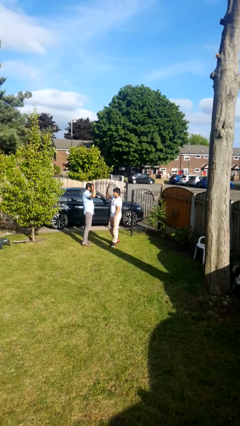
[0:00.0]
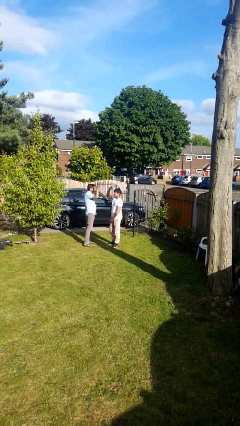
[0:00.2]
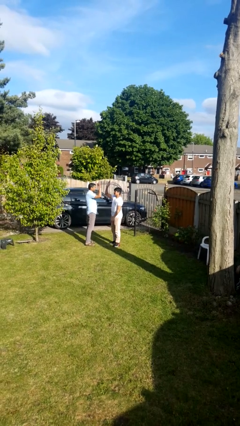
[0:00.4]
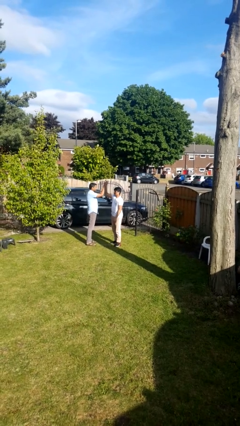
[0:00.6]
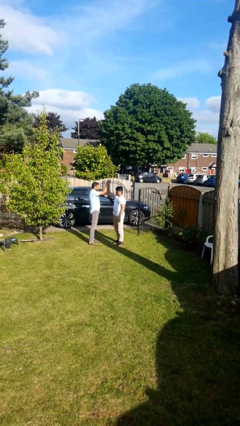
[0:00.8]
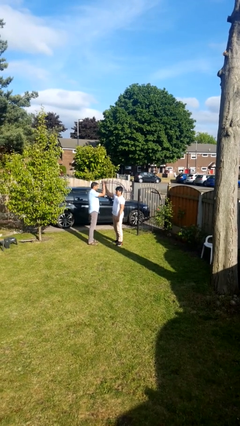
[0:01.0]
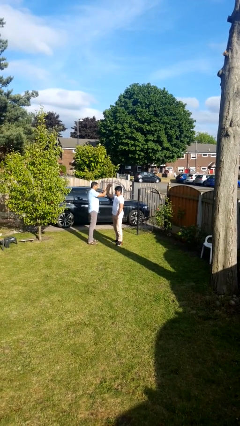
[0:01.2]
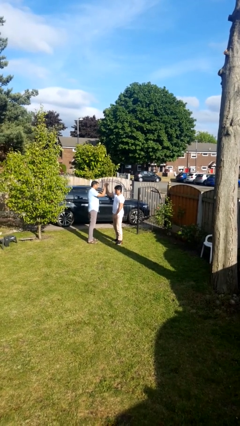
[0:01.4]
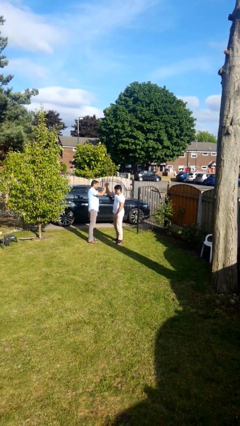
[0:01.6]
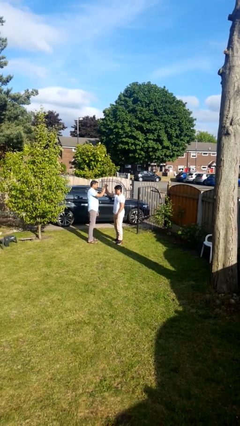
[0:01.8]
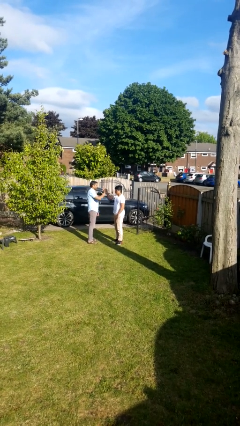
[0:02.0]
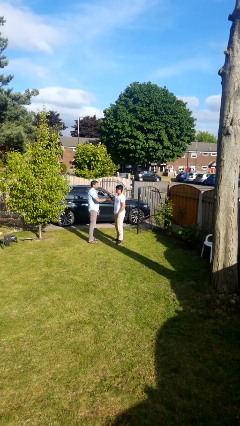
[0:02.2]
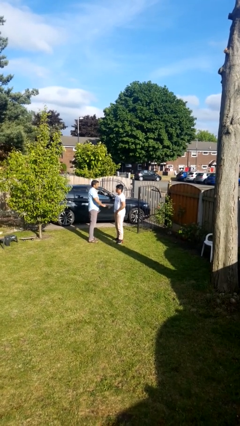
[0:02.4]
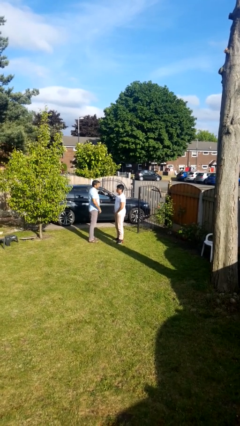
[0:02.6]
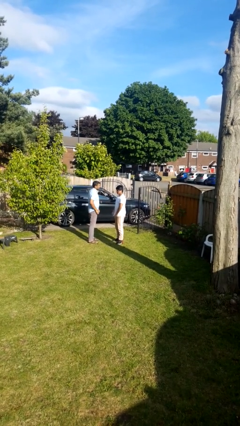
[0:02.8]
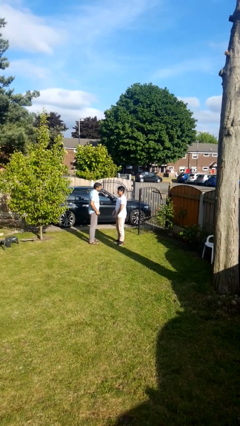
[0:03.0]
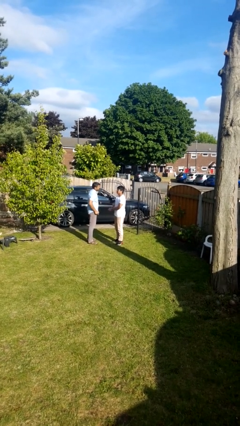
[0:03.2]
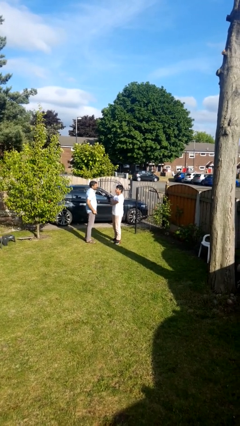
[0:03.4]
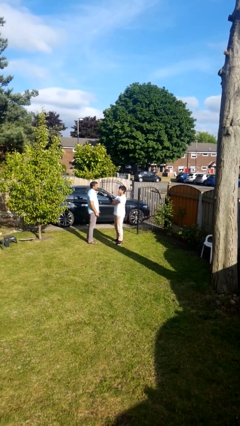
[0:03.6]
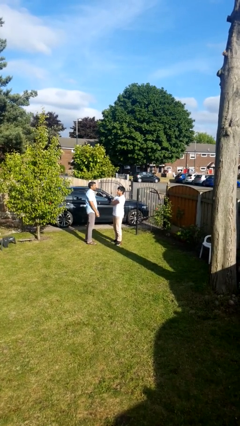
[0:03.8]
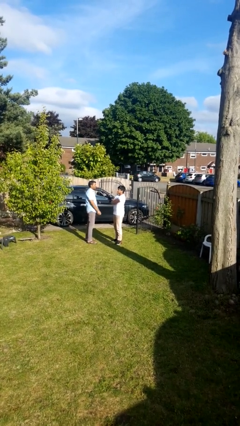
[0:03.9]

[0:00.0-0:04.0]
person highfives hand

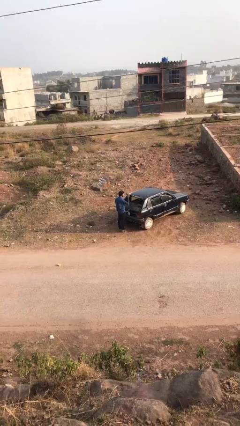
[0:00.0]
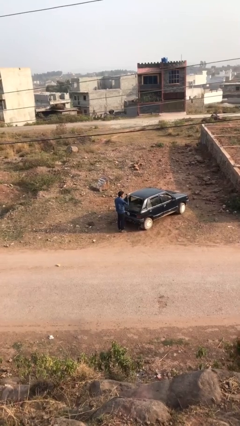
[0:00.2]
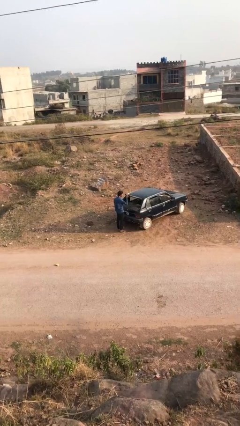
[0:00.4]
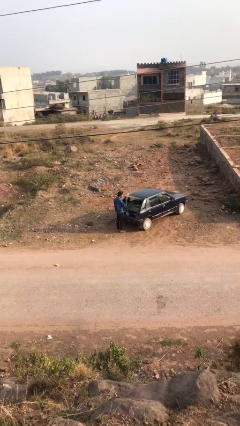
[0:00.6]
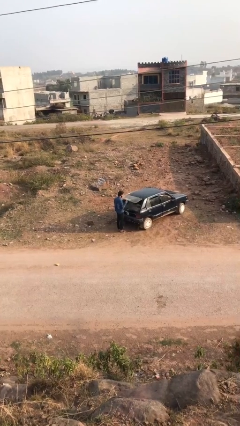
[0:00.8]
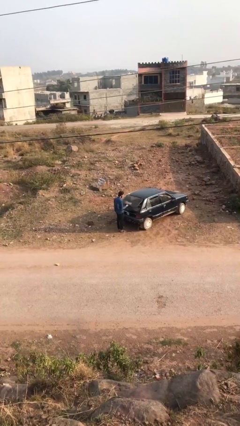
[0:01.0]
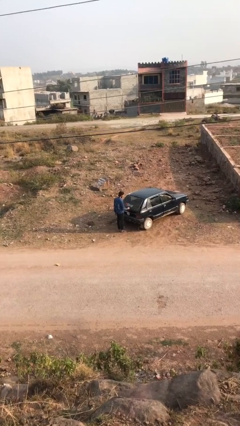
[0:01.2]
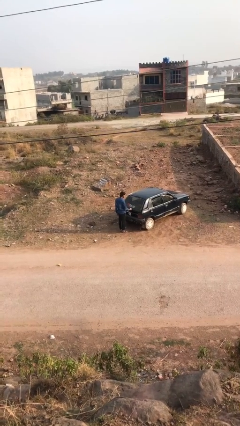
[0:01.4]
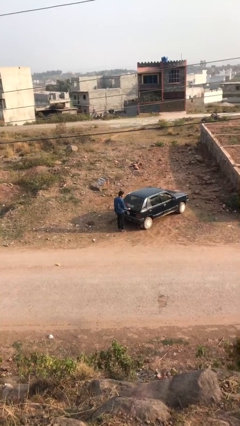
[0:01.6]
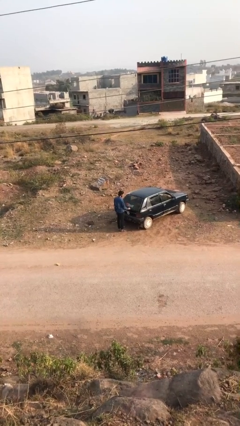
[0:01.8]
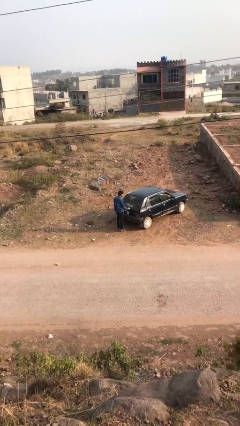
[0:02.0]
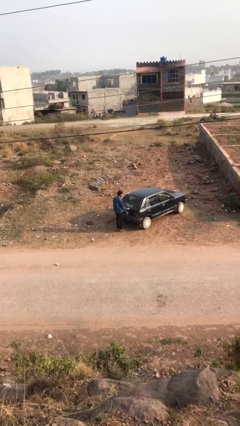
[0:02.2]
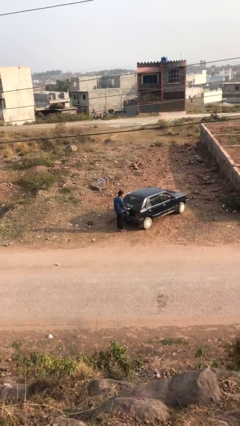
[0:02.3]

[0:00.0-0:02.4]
person closes car trunk

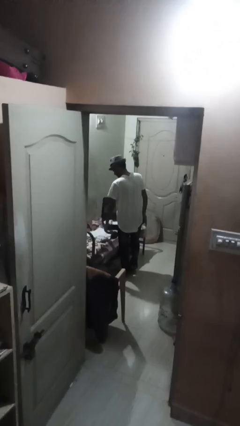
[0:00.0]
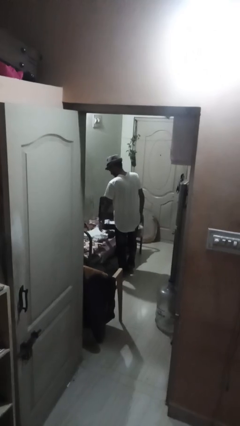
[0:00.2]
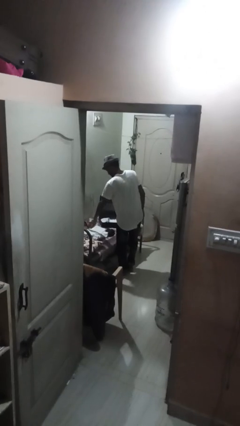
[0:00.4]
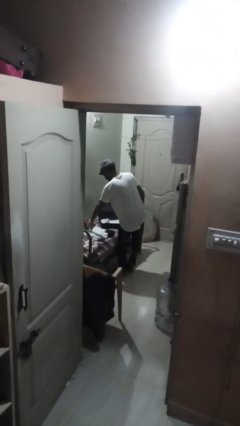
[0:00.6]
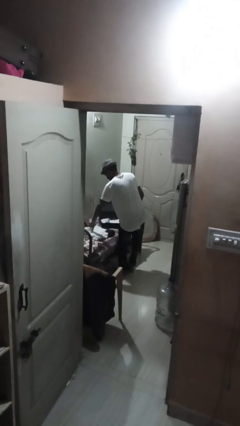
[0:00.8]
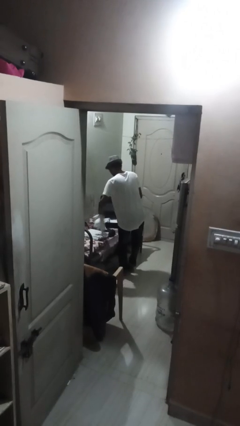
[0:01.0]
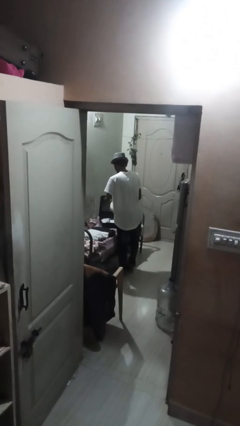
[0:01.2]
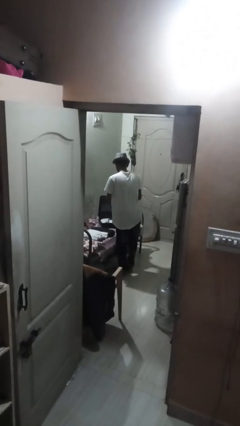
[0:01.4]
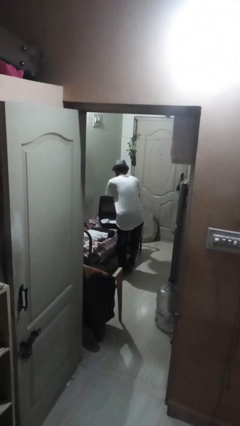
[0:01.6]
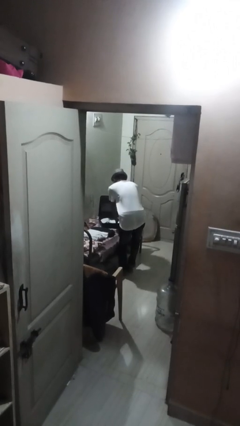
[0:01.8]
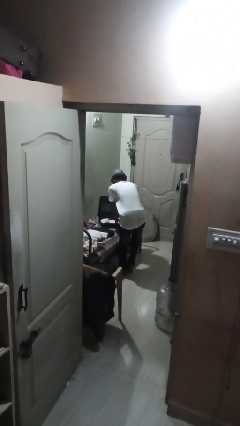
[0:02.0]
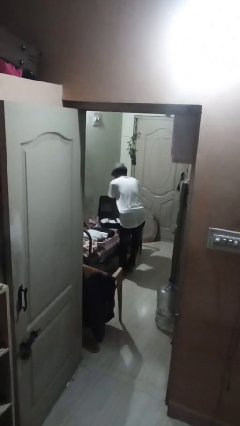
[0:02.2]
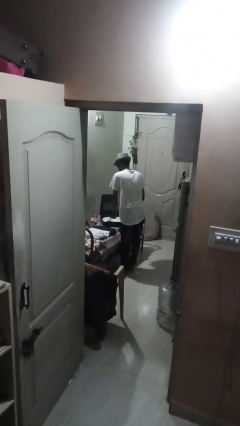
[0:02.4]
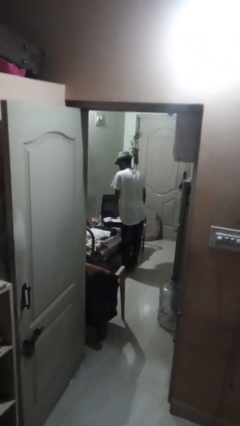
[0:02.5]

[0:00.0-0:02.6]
person loads clothes into suitcase

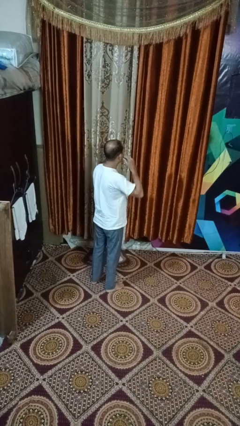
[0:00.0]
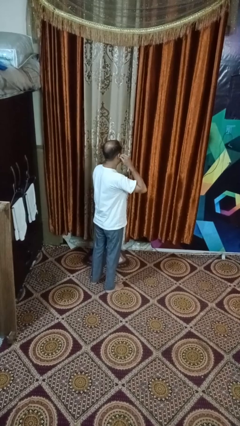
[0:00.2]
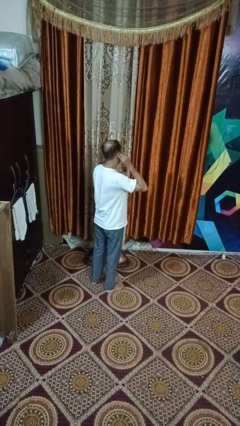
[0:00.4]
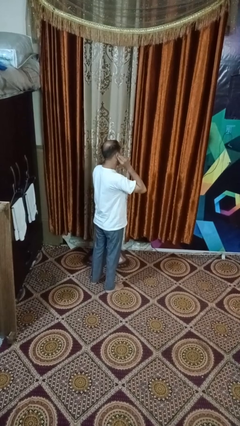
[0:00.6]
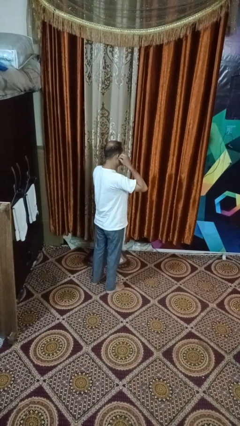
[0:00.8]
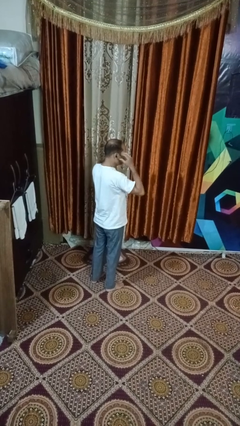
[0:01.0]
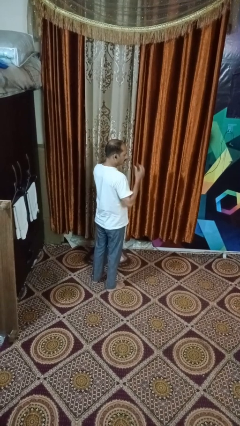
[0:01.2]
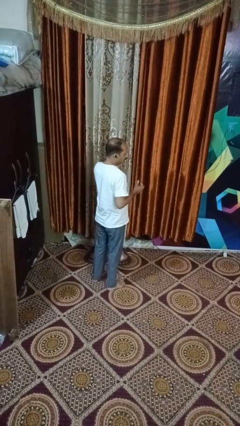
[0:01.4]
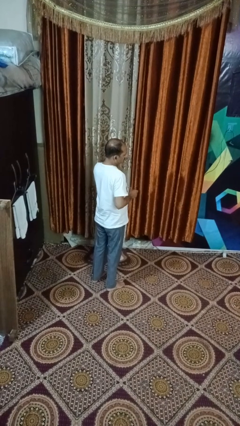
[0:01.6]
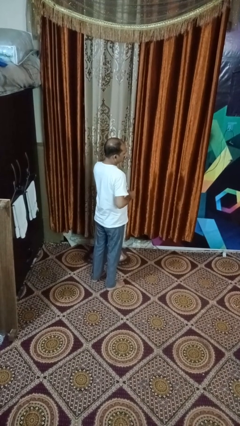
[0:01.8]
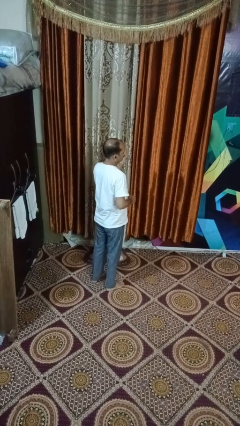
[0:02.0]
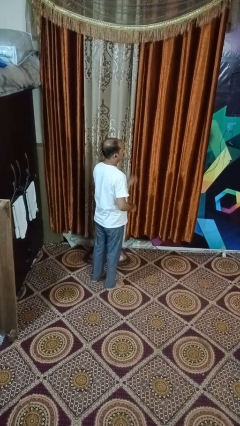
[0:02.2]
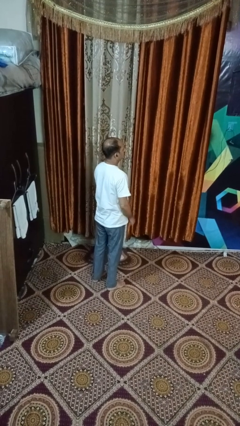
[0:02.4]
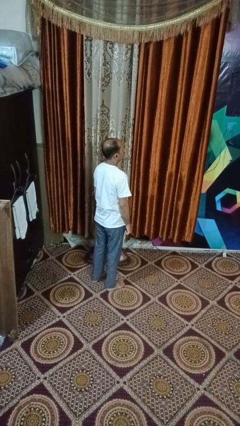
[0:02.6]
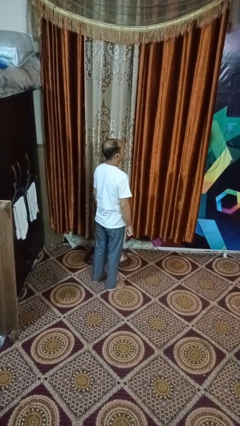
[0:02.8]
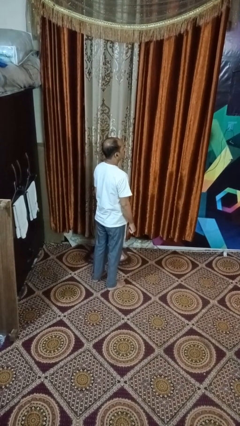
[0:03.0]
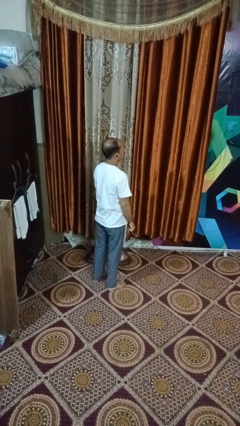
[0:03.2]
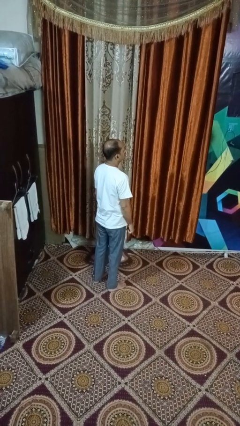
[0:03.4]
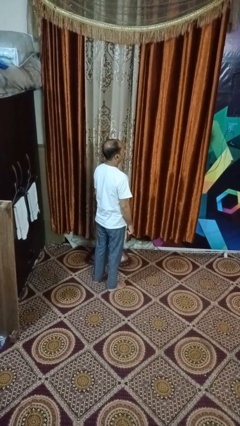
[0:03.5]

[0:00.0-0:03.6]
person puts on headphones

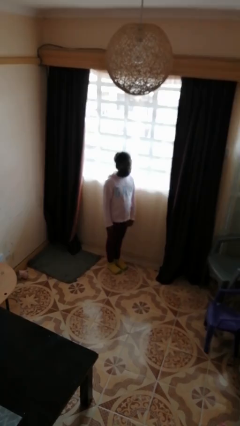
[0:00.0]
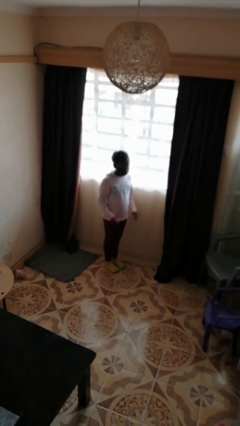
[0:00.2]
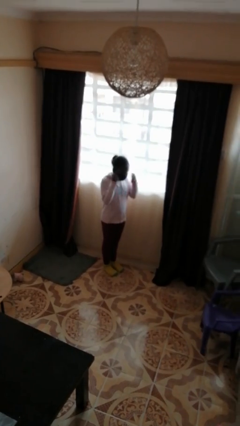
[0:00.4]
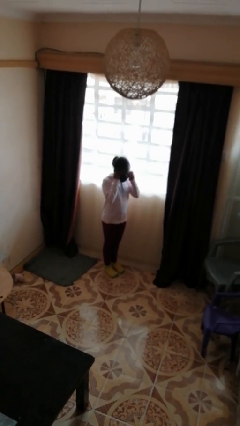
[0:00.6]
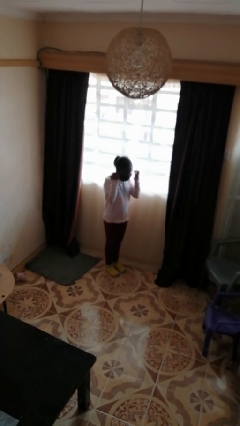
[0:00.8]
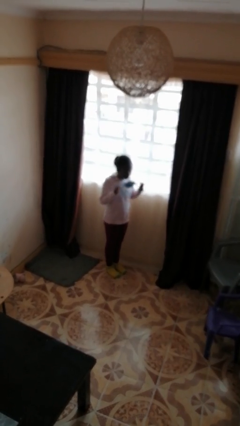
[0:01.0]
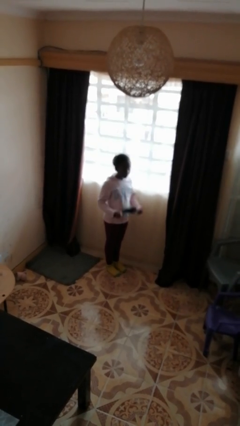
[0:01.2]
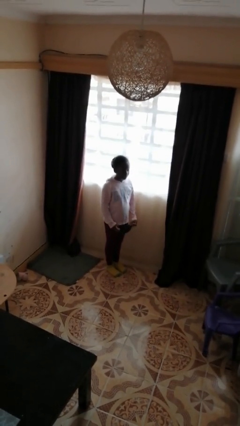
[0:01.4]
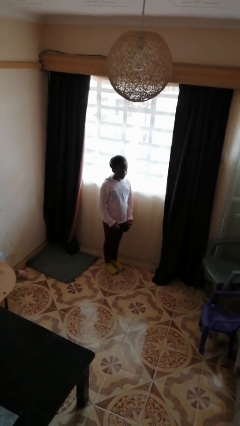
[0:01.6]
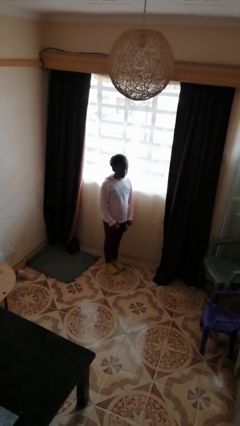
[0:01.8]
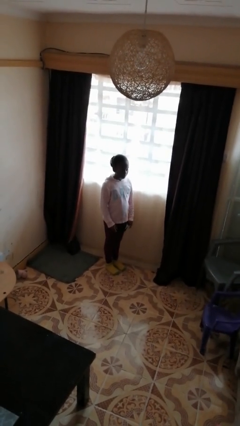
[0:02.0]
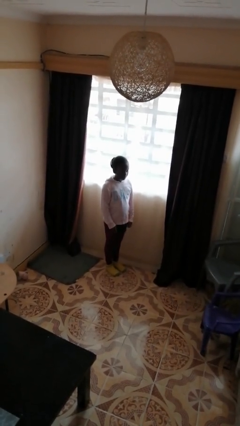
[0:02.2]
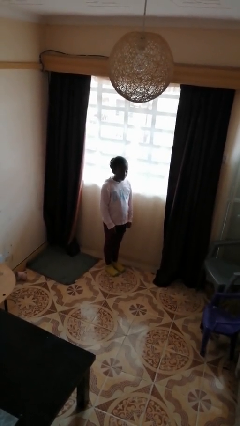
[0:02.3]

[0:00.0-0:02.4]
person takes off facemask

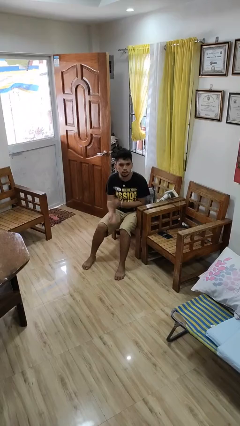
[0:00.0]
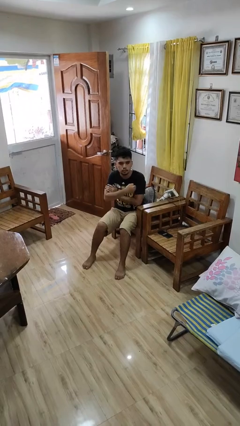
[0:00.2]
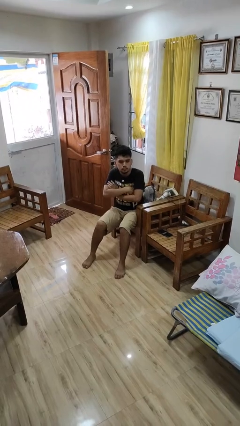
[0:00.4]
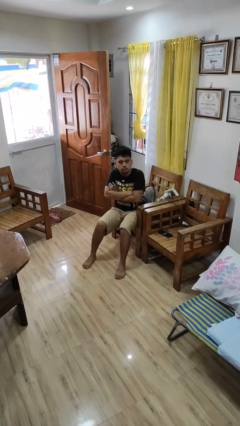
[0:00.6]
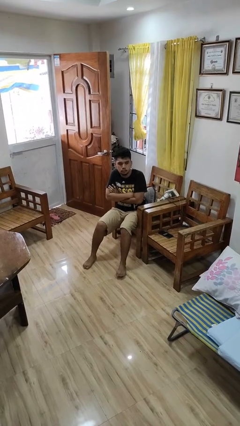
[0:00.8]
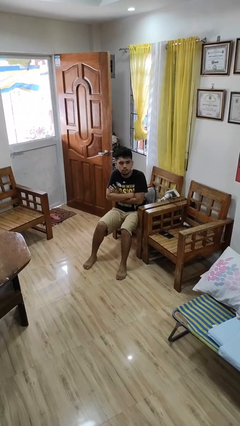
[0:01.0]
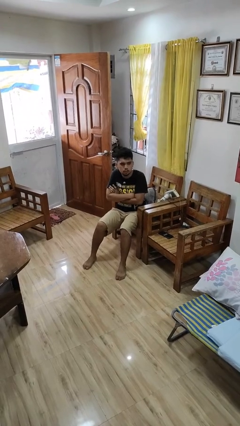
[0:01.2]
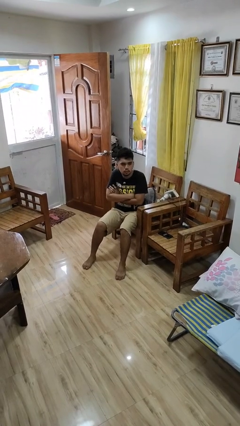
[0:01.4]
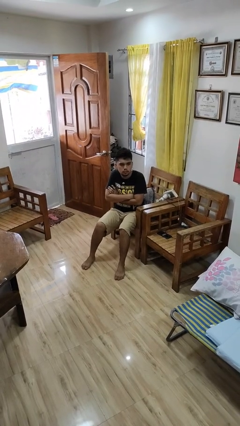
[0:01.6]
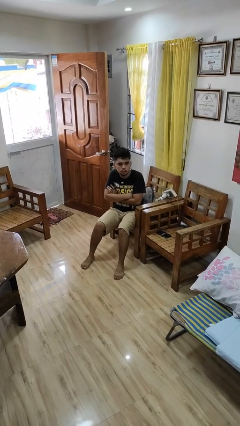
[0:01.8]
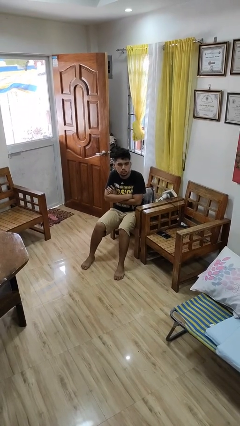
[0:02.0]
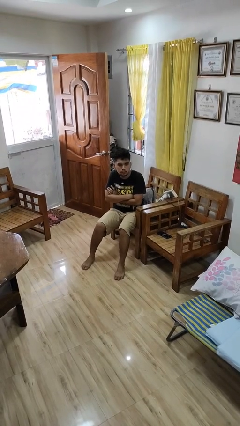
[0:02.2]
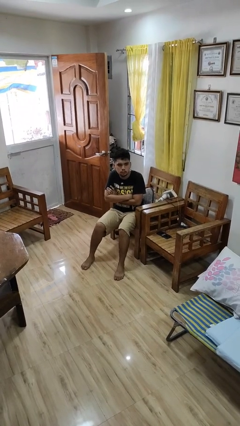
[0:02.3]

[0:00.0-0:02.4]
person crosses arms
